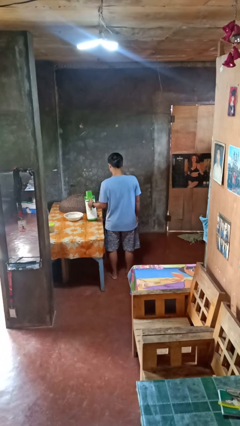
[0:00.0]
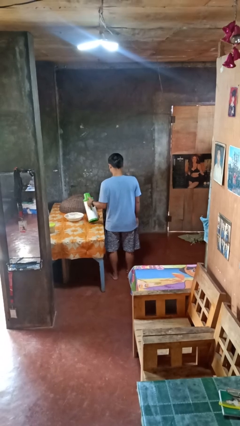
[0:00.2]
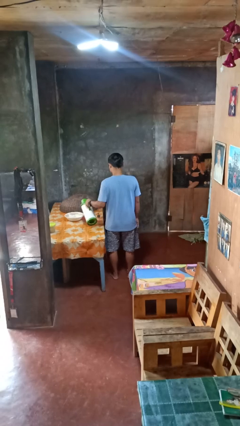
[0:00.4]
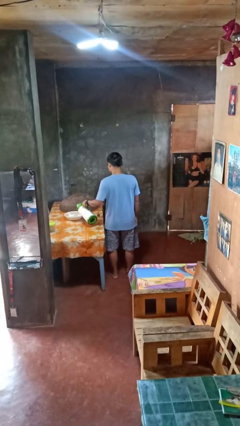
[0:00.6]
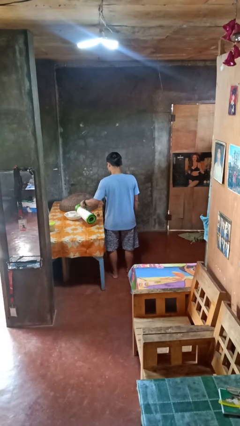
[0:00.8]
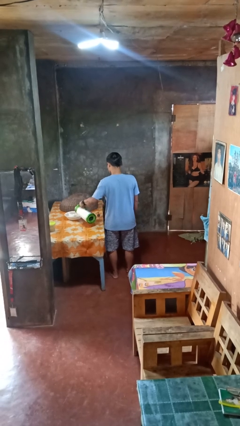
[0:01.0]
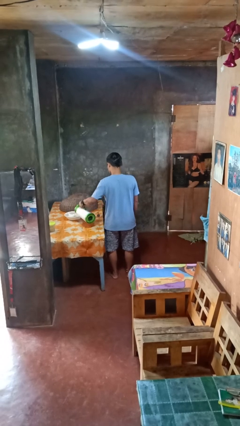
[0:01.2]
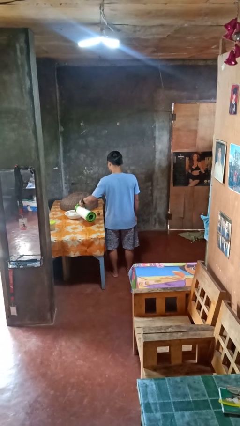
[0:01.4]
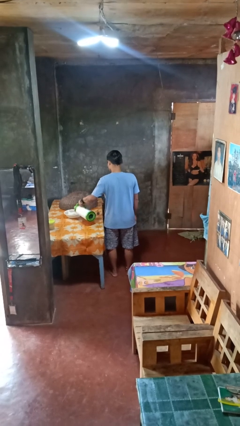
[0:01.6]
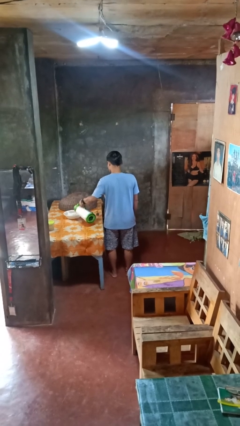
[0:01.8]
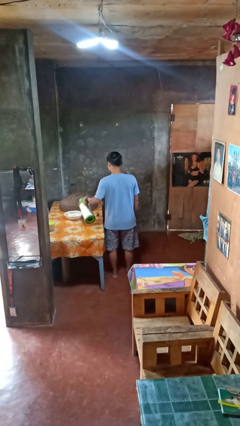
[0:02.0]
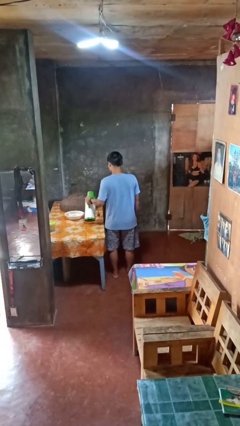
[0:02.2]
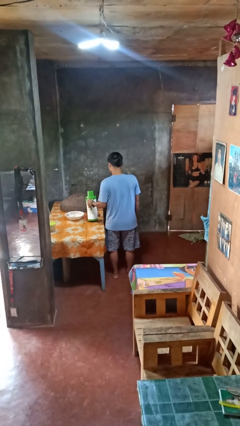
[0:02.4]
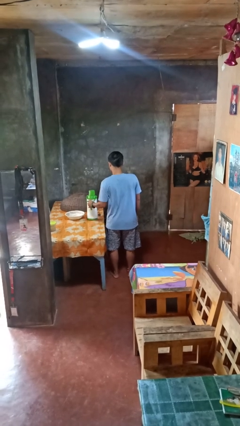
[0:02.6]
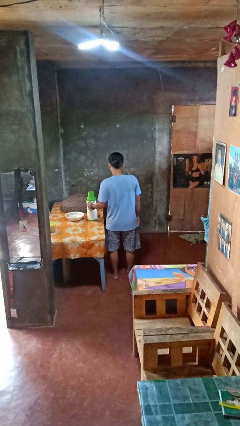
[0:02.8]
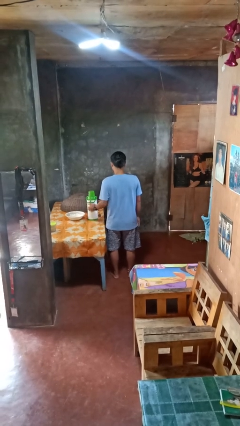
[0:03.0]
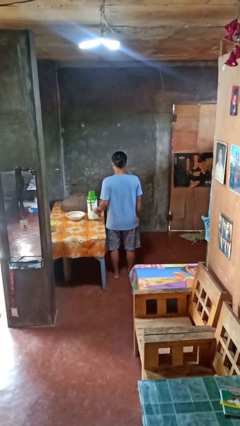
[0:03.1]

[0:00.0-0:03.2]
person pours into bowl

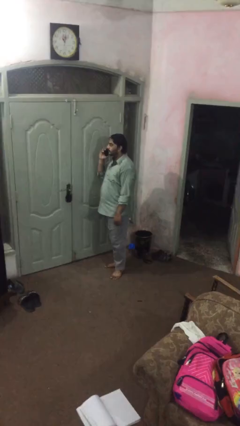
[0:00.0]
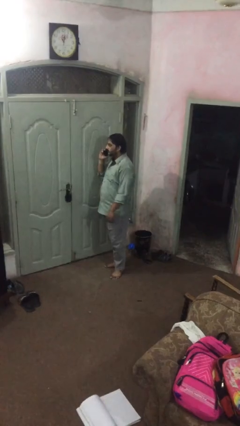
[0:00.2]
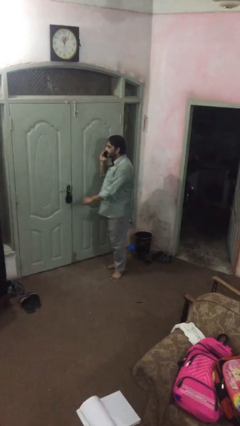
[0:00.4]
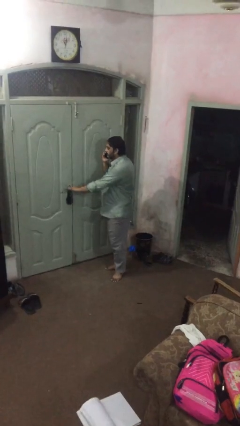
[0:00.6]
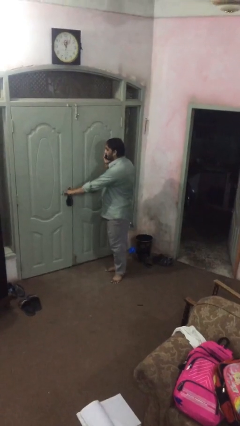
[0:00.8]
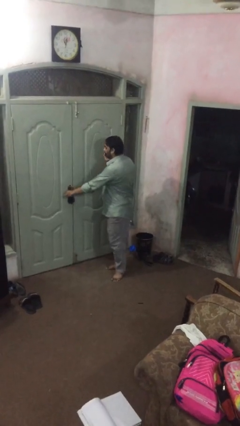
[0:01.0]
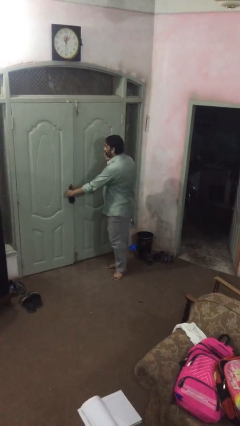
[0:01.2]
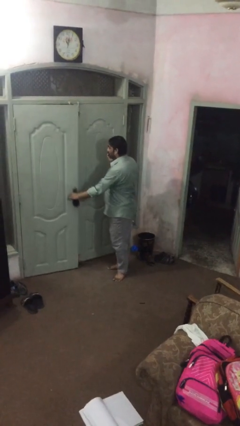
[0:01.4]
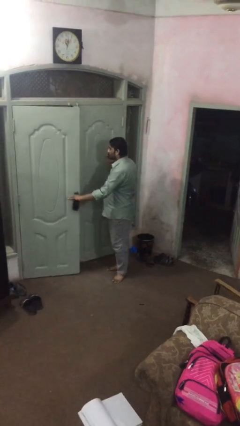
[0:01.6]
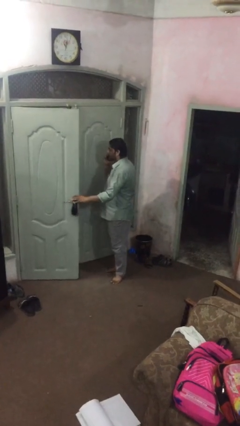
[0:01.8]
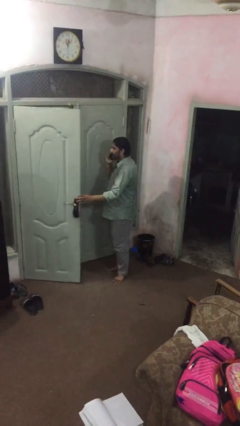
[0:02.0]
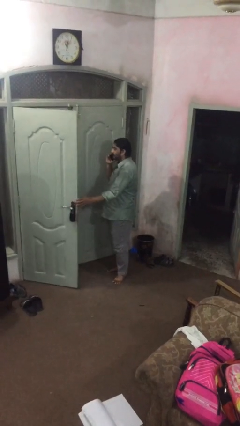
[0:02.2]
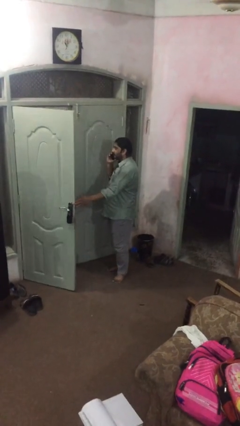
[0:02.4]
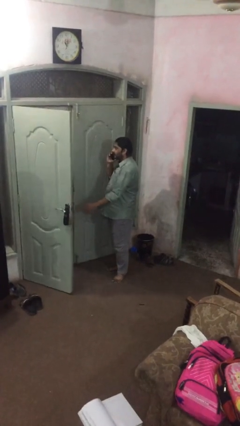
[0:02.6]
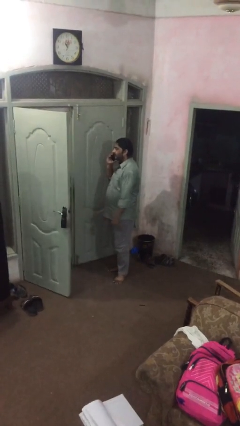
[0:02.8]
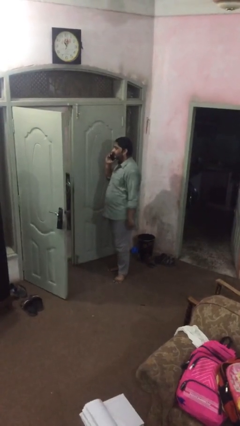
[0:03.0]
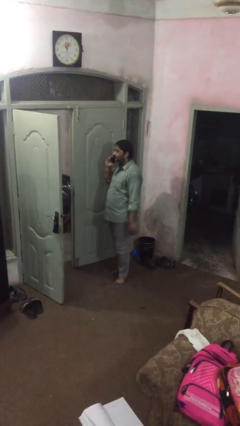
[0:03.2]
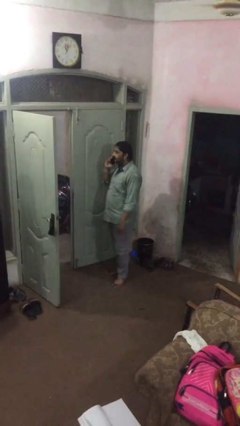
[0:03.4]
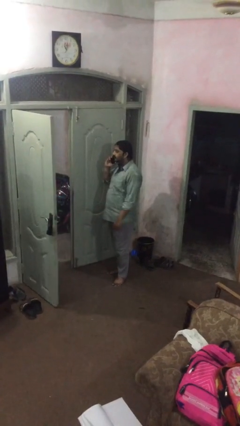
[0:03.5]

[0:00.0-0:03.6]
person opens facility door

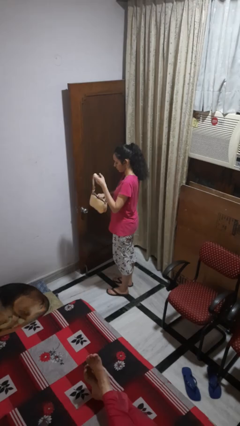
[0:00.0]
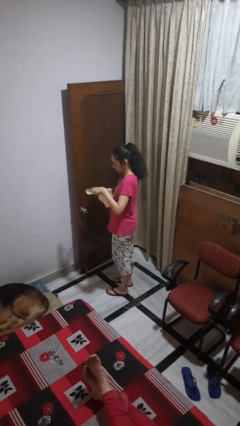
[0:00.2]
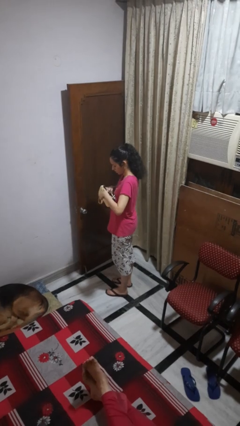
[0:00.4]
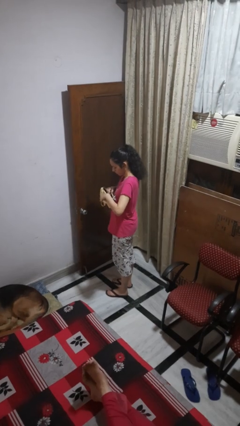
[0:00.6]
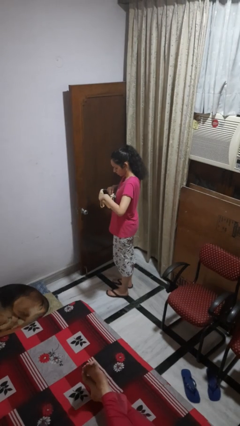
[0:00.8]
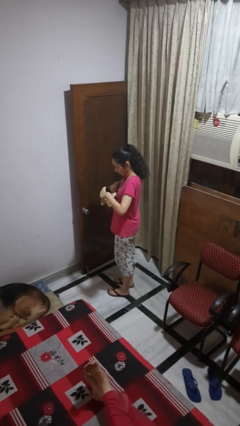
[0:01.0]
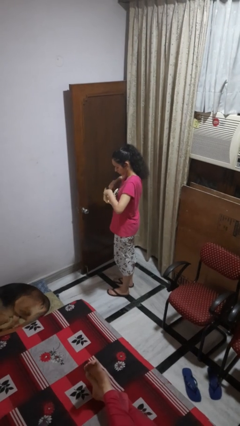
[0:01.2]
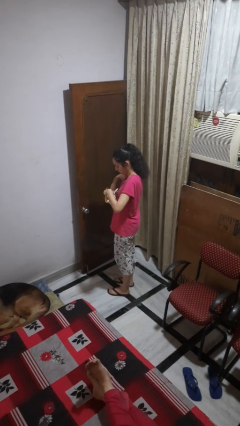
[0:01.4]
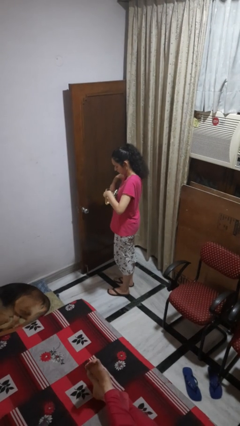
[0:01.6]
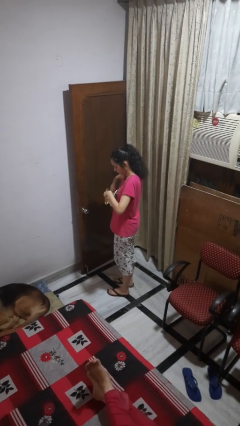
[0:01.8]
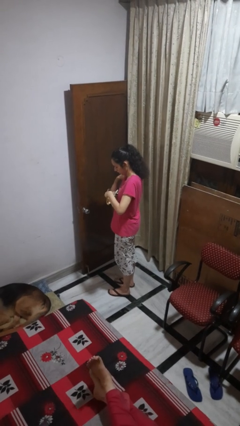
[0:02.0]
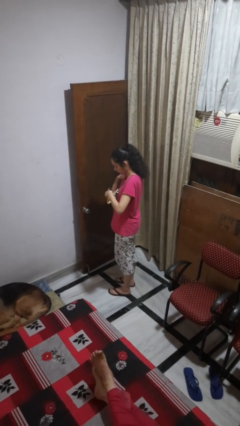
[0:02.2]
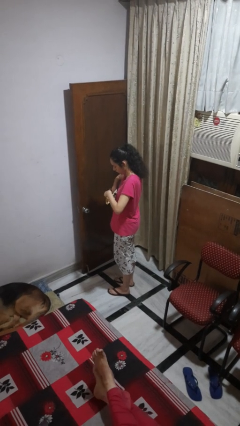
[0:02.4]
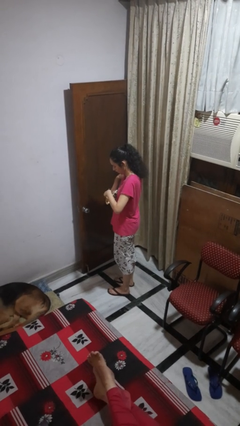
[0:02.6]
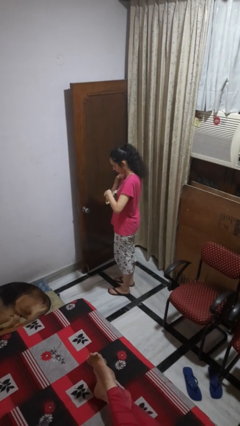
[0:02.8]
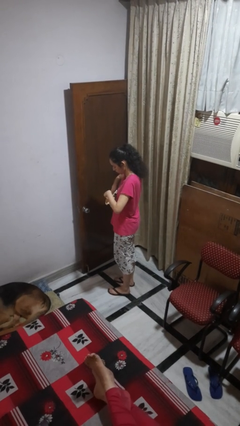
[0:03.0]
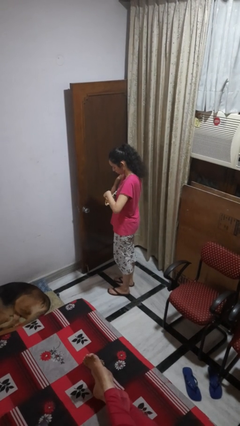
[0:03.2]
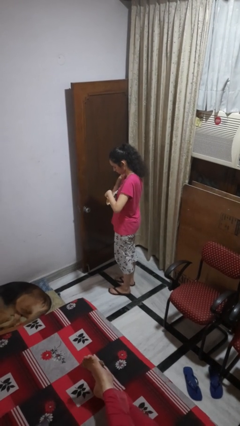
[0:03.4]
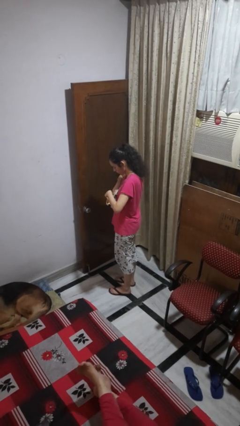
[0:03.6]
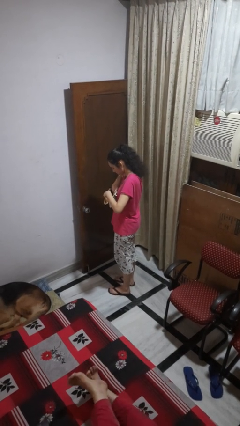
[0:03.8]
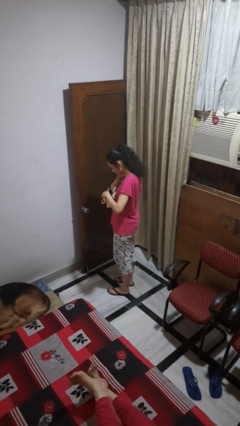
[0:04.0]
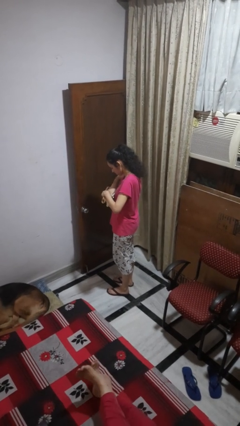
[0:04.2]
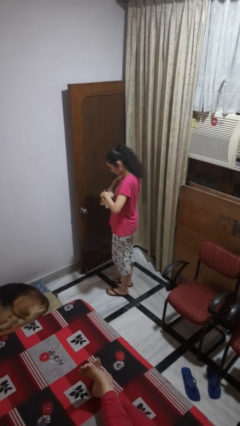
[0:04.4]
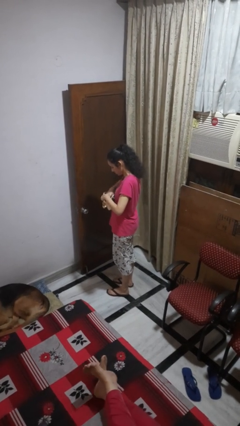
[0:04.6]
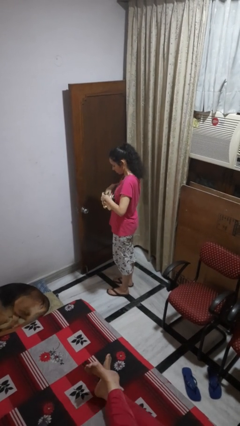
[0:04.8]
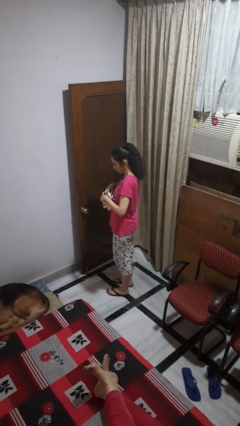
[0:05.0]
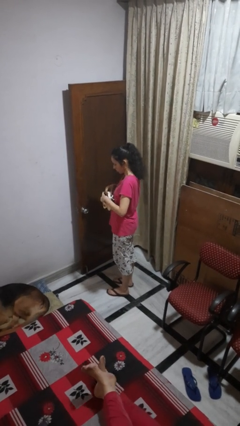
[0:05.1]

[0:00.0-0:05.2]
person searches in purse

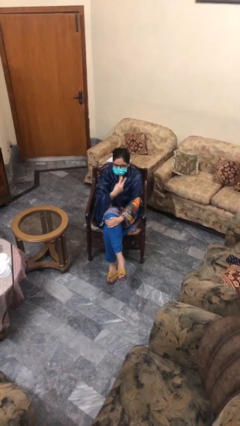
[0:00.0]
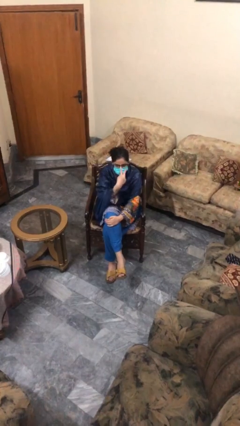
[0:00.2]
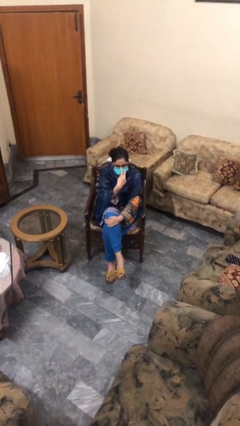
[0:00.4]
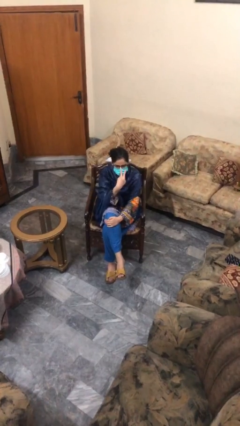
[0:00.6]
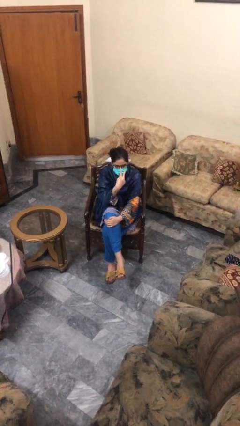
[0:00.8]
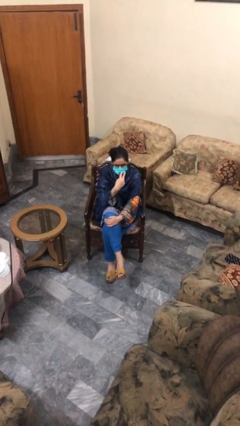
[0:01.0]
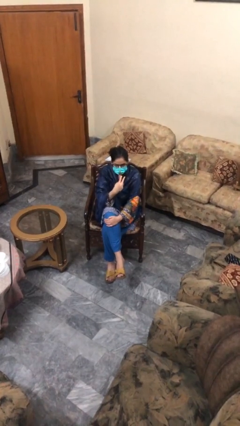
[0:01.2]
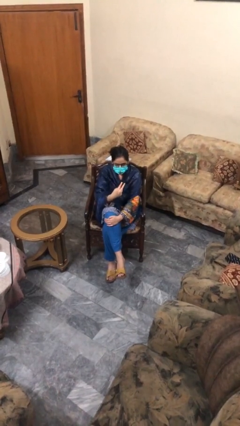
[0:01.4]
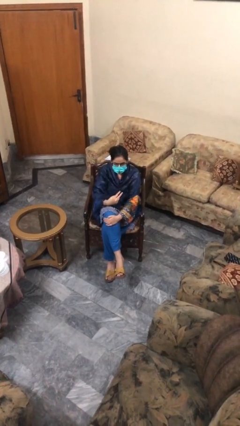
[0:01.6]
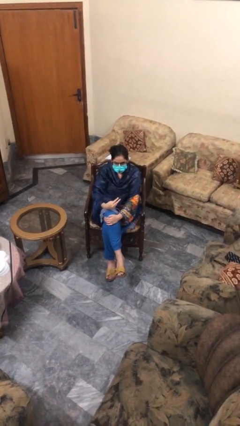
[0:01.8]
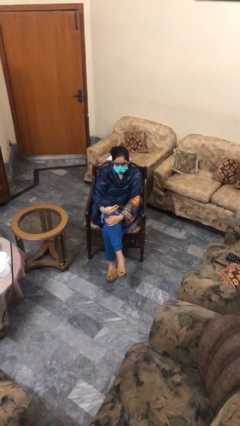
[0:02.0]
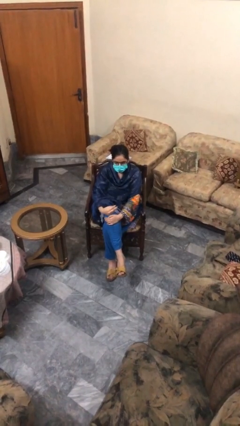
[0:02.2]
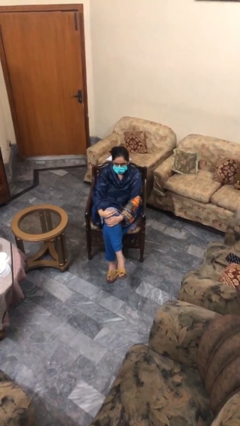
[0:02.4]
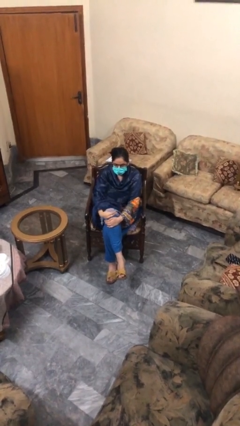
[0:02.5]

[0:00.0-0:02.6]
person gestures watch closely

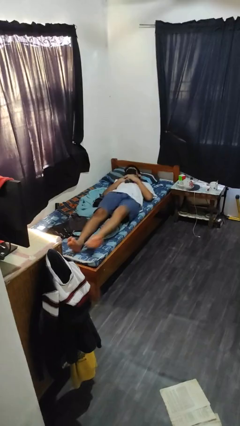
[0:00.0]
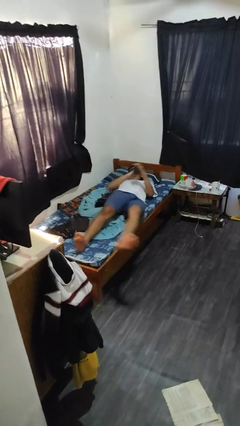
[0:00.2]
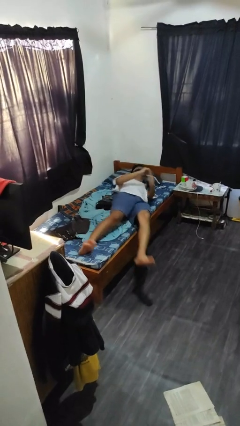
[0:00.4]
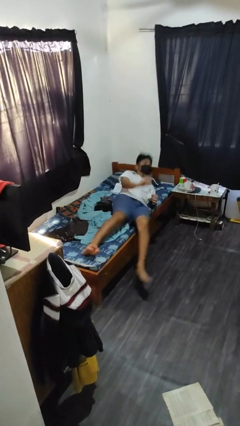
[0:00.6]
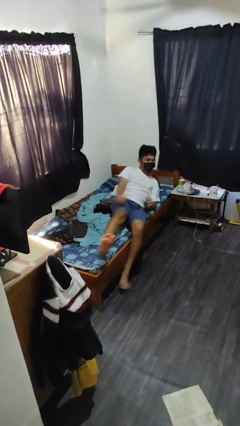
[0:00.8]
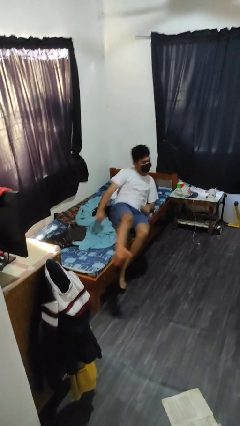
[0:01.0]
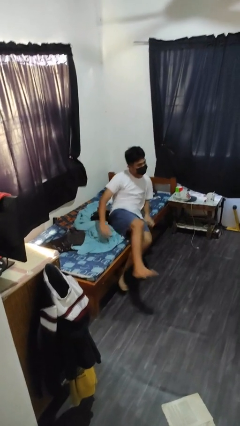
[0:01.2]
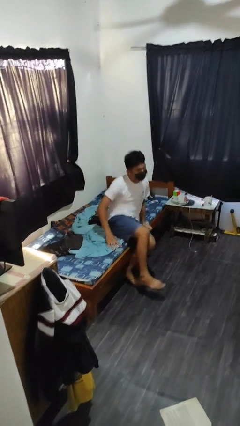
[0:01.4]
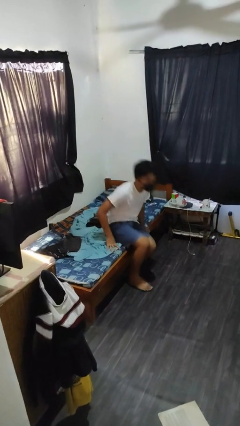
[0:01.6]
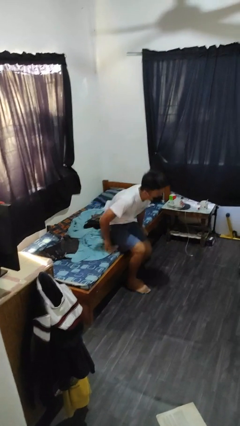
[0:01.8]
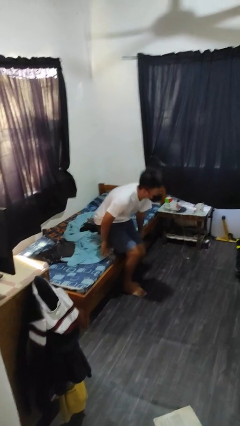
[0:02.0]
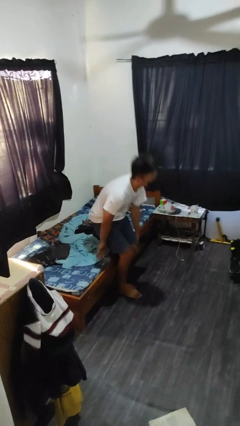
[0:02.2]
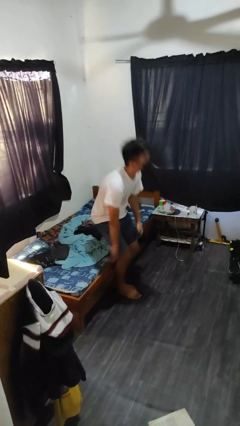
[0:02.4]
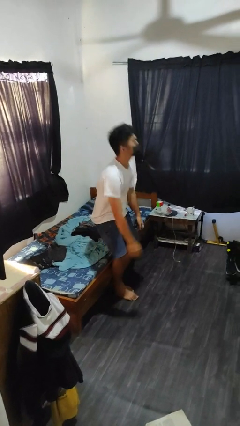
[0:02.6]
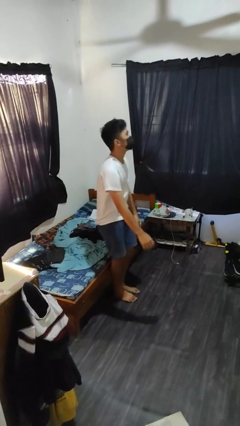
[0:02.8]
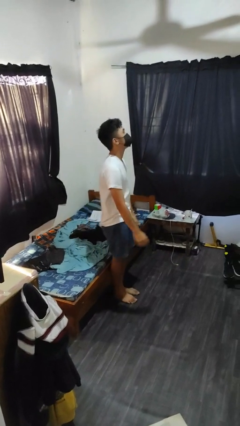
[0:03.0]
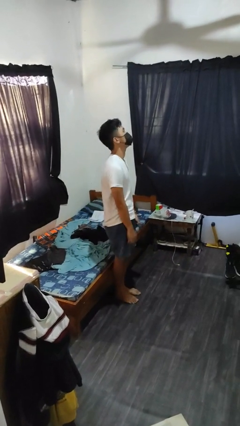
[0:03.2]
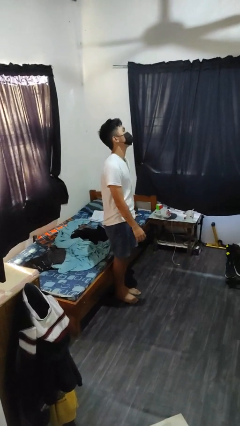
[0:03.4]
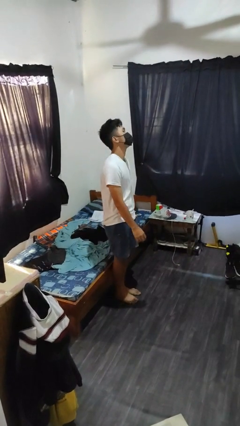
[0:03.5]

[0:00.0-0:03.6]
person stands up
